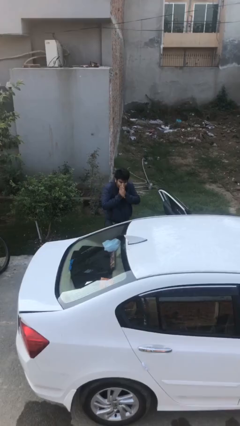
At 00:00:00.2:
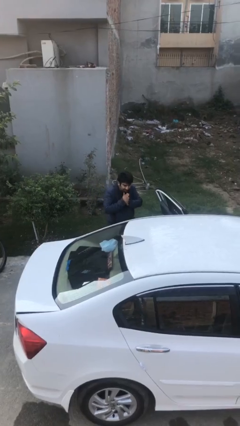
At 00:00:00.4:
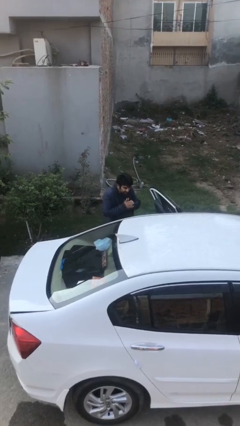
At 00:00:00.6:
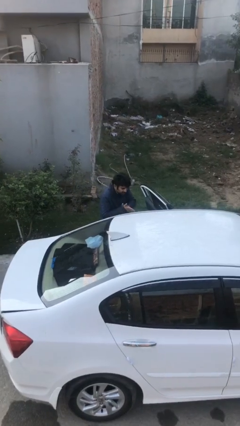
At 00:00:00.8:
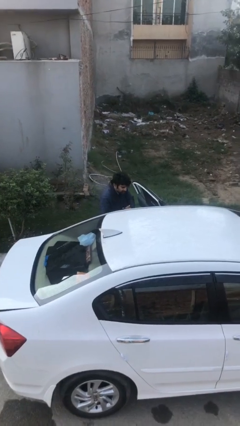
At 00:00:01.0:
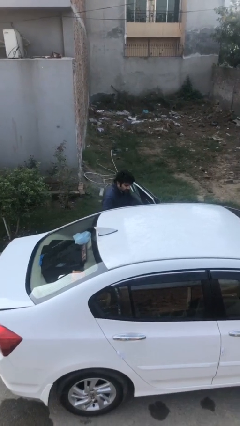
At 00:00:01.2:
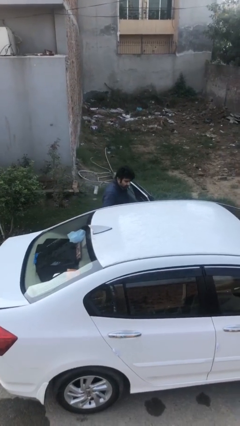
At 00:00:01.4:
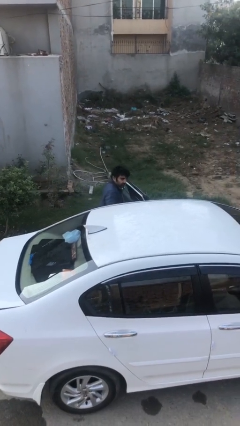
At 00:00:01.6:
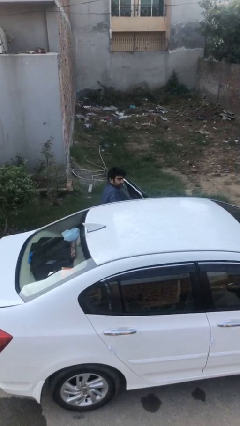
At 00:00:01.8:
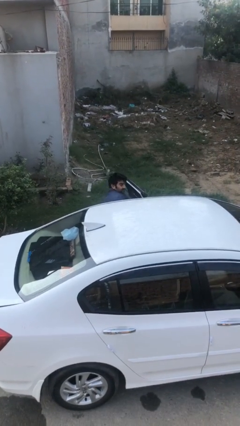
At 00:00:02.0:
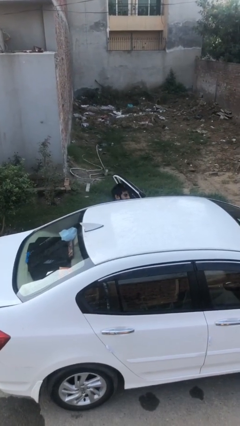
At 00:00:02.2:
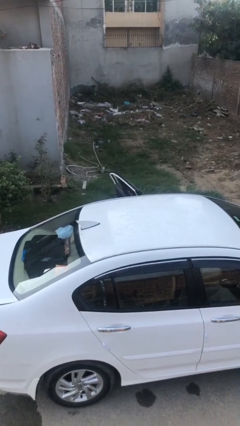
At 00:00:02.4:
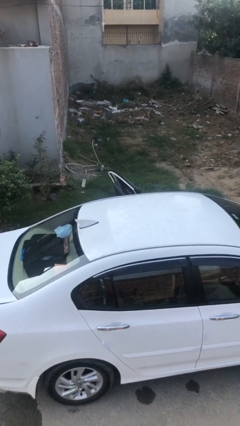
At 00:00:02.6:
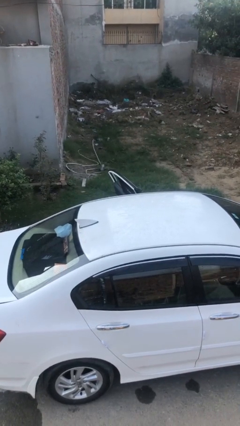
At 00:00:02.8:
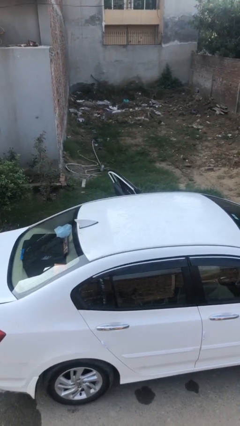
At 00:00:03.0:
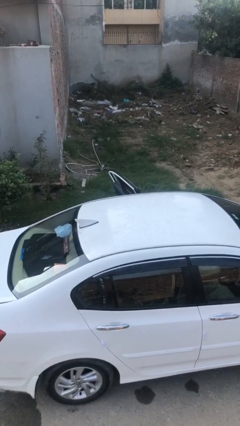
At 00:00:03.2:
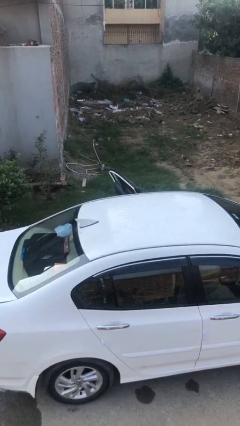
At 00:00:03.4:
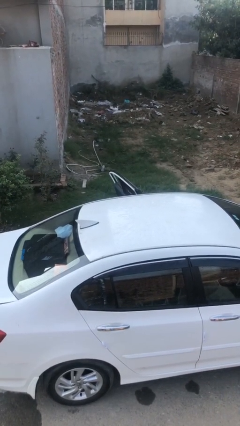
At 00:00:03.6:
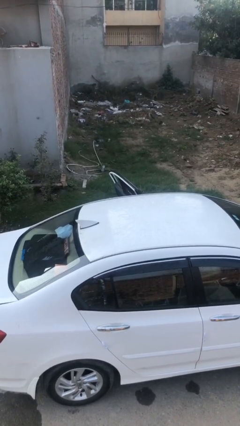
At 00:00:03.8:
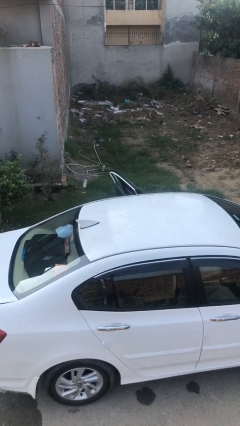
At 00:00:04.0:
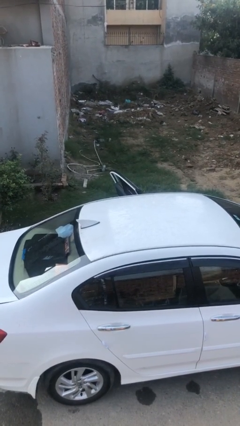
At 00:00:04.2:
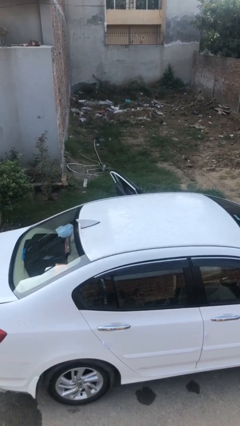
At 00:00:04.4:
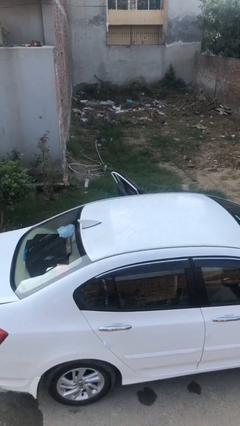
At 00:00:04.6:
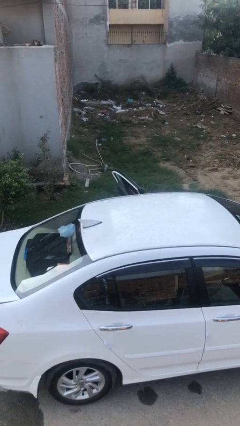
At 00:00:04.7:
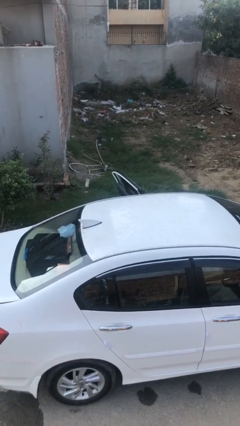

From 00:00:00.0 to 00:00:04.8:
person enters car

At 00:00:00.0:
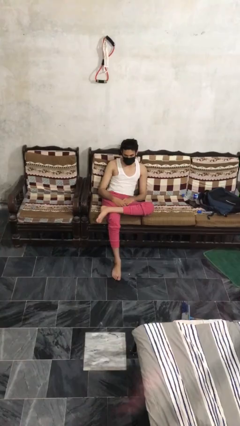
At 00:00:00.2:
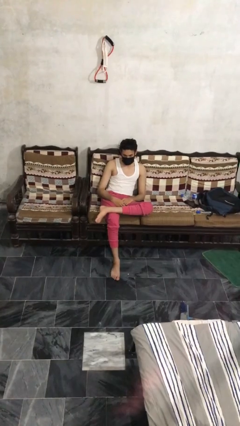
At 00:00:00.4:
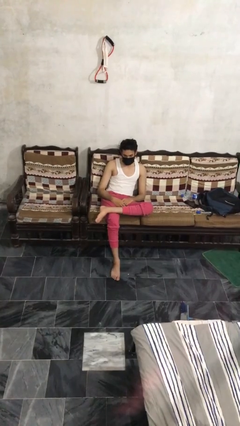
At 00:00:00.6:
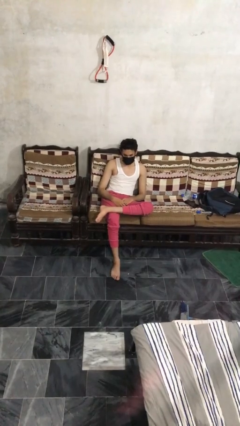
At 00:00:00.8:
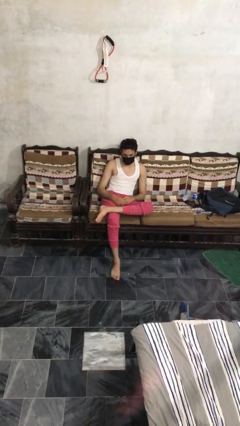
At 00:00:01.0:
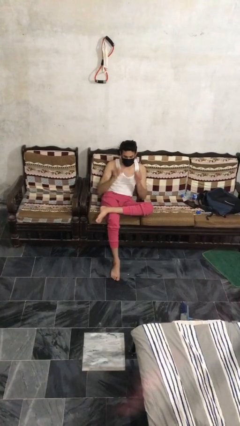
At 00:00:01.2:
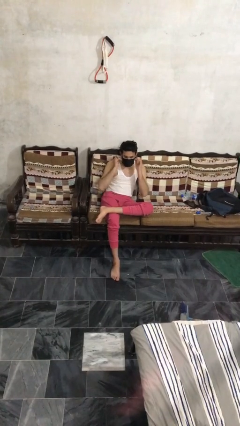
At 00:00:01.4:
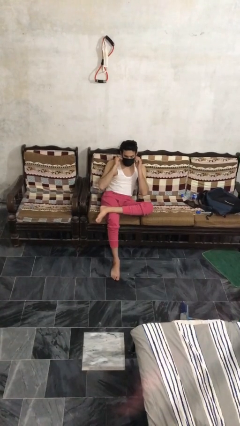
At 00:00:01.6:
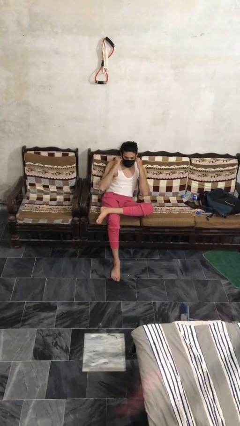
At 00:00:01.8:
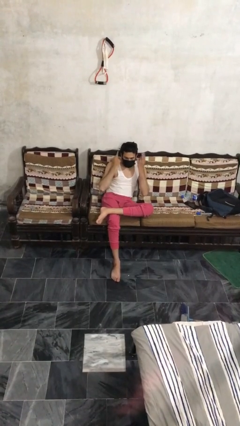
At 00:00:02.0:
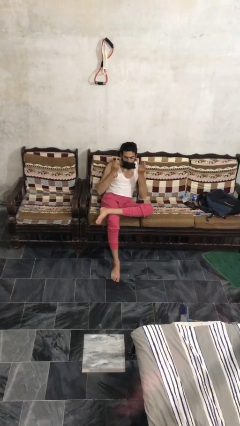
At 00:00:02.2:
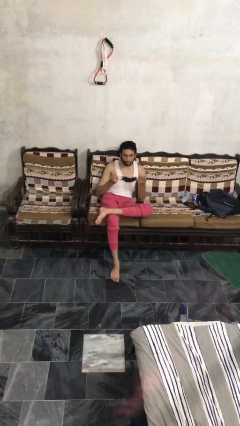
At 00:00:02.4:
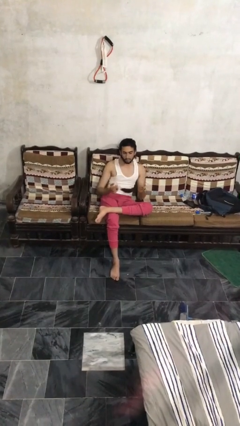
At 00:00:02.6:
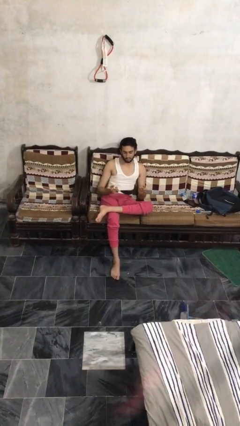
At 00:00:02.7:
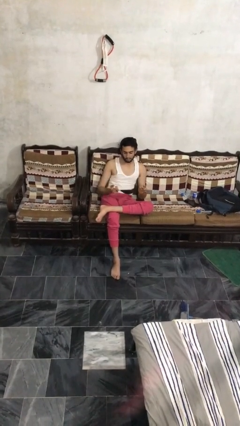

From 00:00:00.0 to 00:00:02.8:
person takes off facemask

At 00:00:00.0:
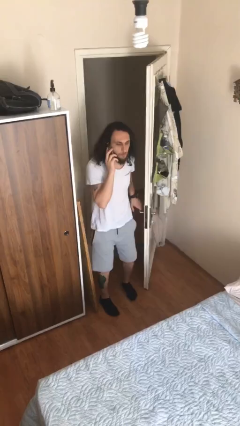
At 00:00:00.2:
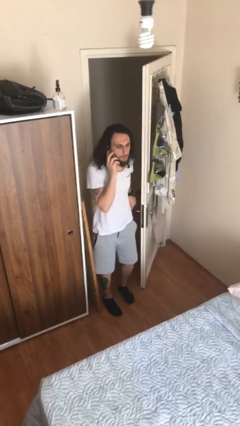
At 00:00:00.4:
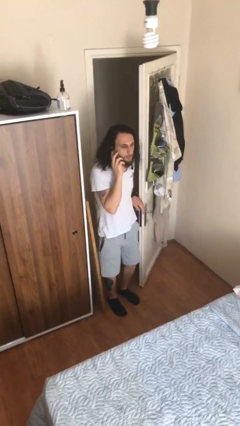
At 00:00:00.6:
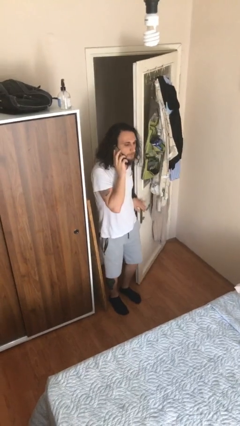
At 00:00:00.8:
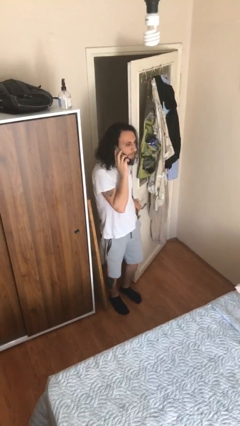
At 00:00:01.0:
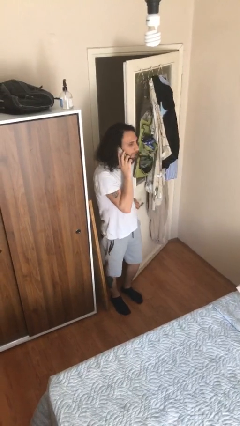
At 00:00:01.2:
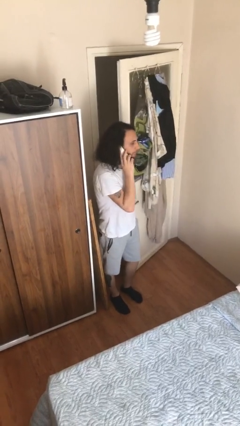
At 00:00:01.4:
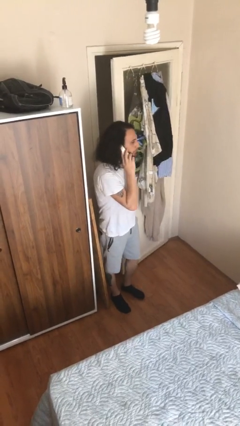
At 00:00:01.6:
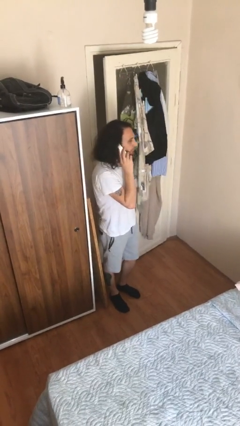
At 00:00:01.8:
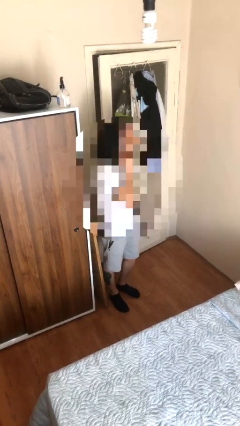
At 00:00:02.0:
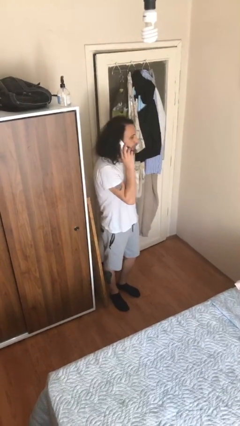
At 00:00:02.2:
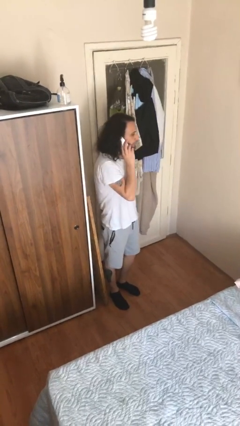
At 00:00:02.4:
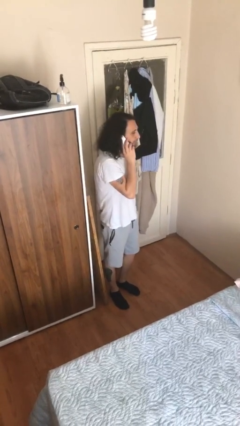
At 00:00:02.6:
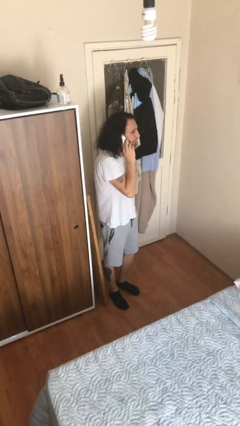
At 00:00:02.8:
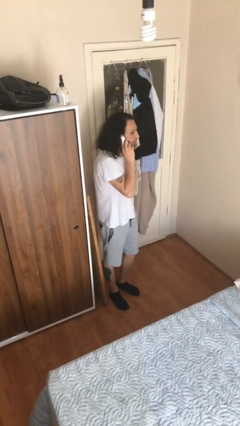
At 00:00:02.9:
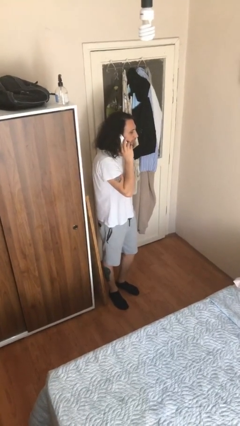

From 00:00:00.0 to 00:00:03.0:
person closes facility door

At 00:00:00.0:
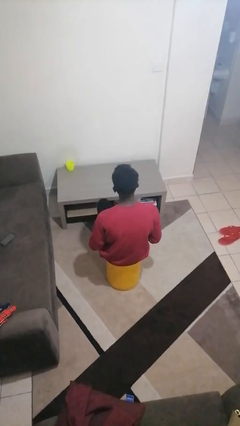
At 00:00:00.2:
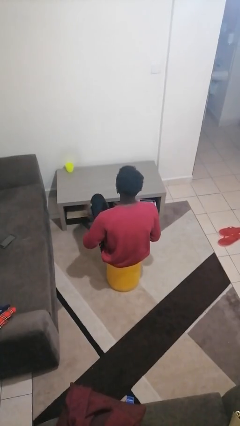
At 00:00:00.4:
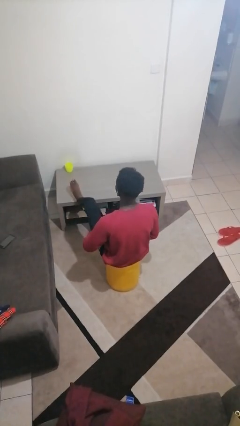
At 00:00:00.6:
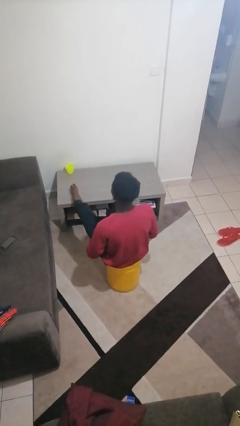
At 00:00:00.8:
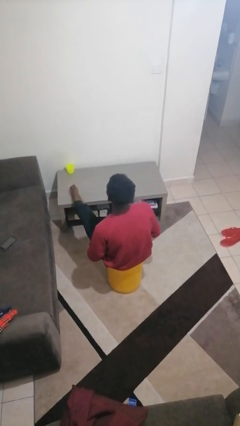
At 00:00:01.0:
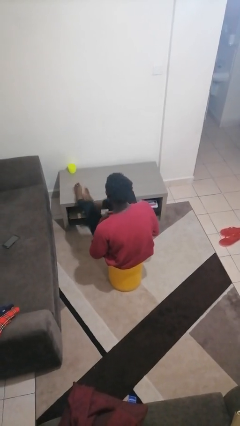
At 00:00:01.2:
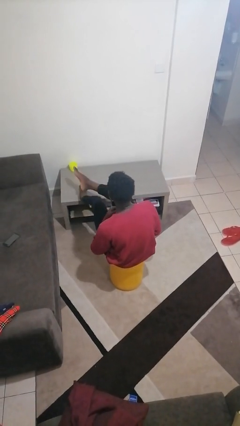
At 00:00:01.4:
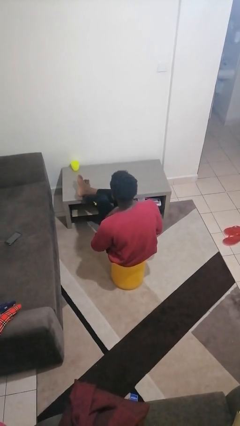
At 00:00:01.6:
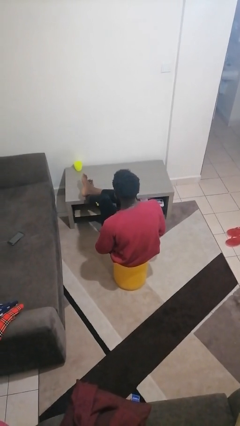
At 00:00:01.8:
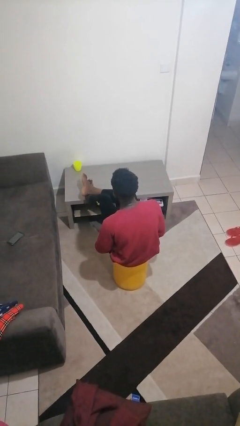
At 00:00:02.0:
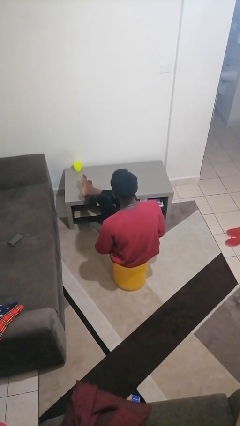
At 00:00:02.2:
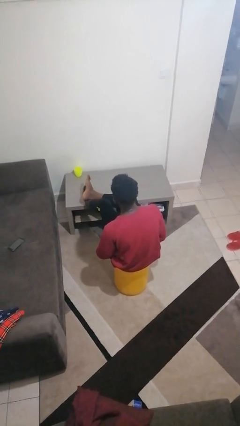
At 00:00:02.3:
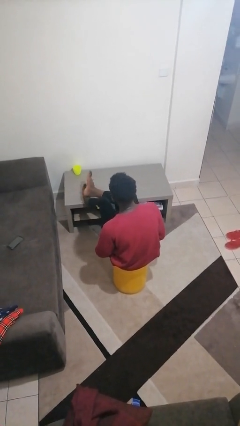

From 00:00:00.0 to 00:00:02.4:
person puts feet up

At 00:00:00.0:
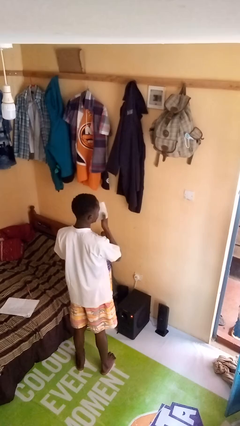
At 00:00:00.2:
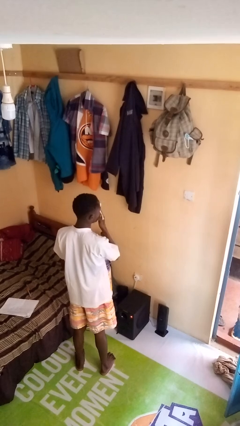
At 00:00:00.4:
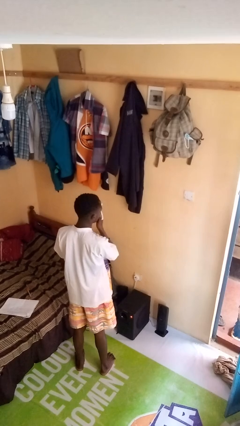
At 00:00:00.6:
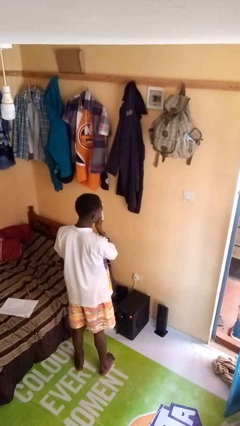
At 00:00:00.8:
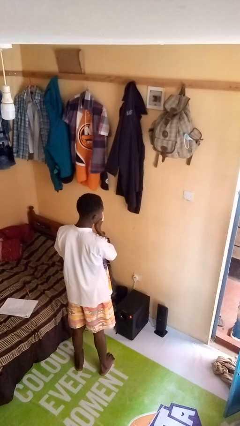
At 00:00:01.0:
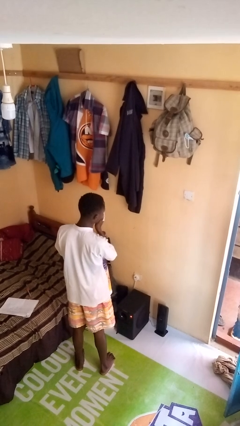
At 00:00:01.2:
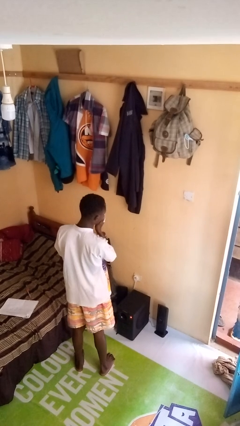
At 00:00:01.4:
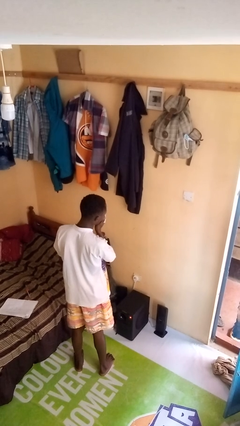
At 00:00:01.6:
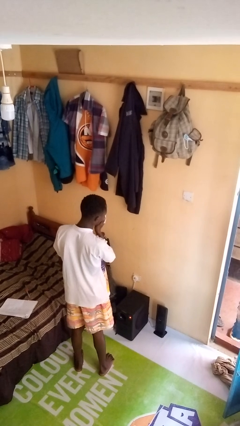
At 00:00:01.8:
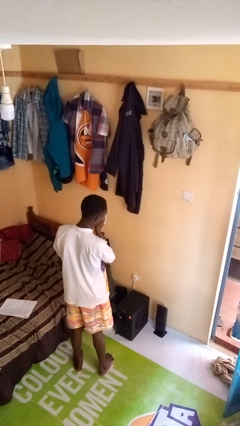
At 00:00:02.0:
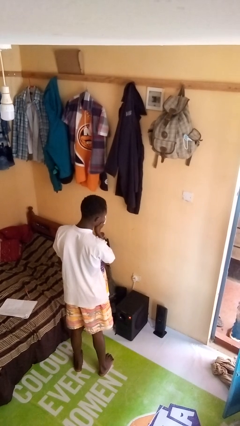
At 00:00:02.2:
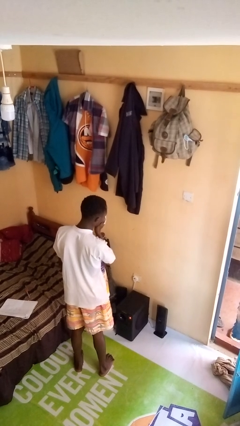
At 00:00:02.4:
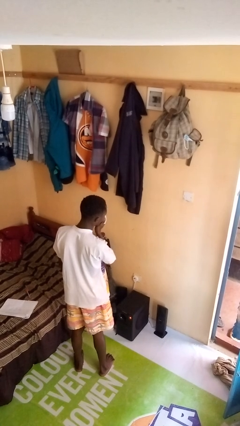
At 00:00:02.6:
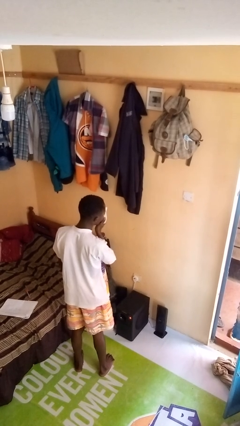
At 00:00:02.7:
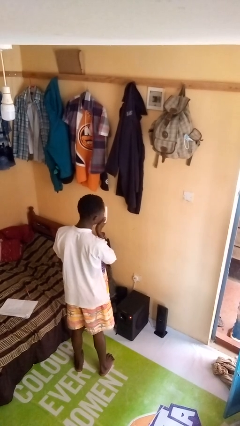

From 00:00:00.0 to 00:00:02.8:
person blows nose

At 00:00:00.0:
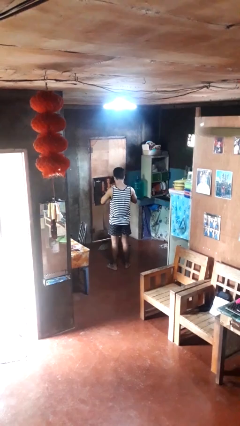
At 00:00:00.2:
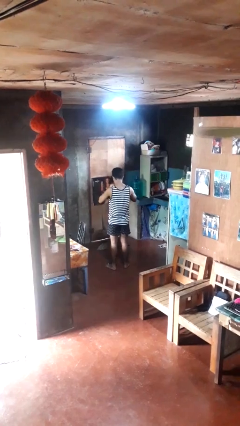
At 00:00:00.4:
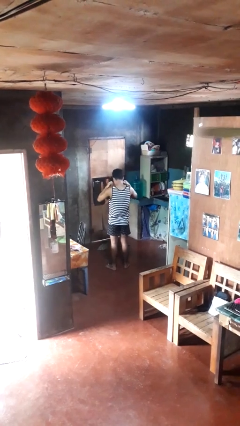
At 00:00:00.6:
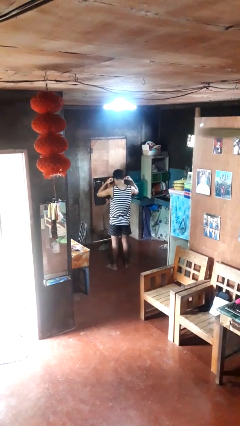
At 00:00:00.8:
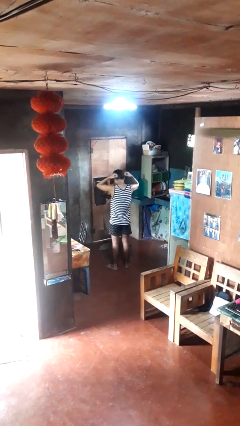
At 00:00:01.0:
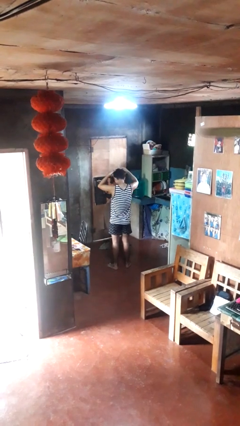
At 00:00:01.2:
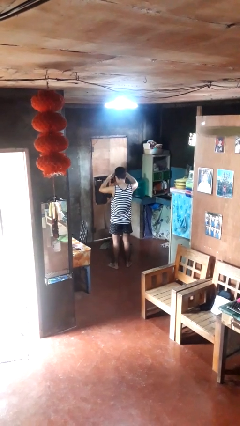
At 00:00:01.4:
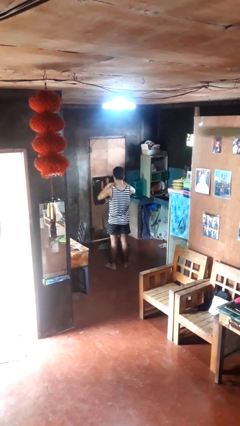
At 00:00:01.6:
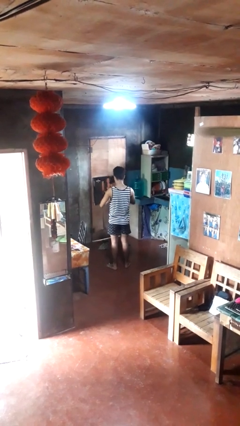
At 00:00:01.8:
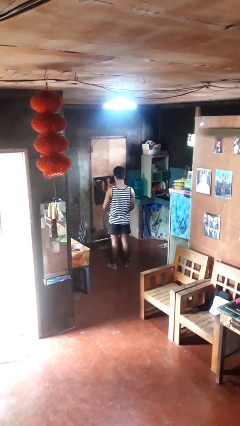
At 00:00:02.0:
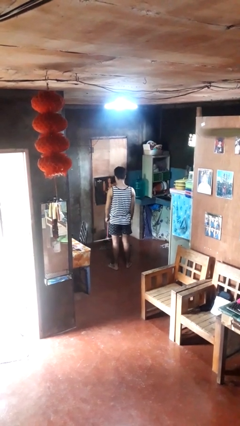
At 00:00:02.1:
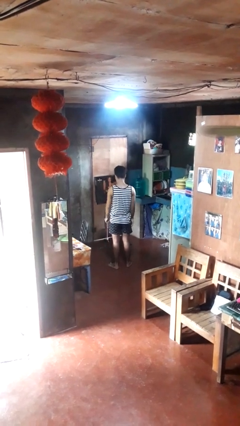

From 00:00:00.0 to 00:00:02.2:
person takes off necklace
